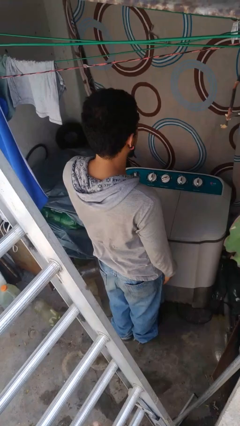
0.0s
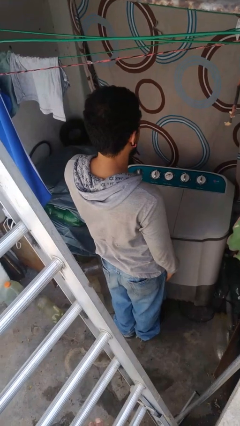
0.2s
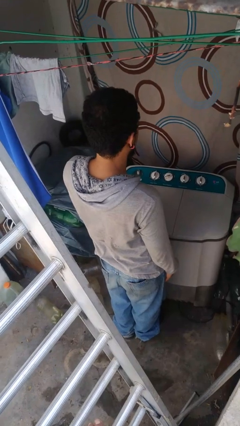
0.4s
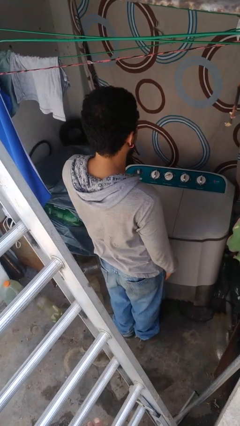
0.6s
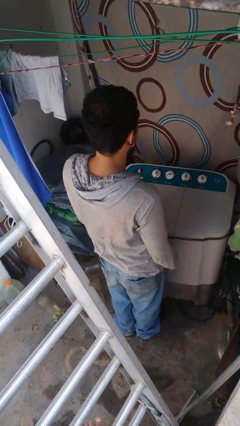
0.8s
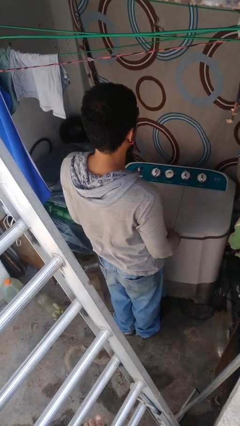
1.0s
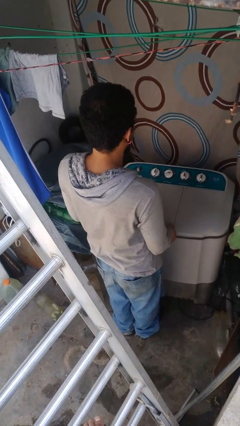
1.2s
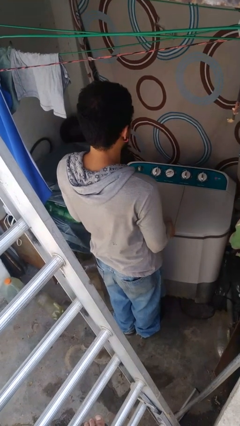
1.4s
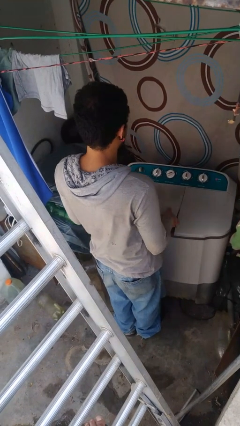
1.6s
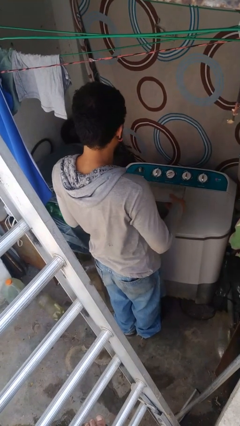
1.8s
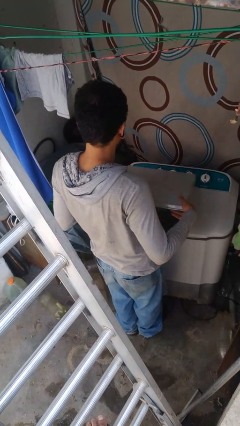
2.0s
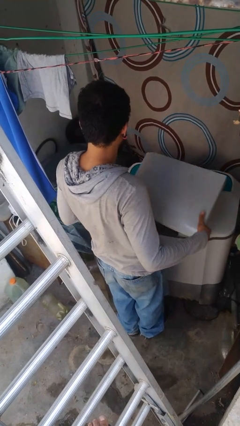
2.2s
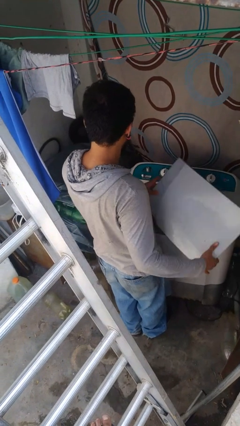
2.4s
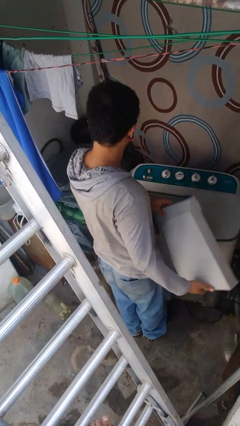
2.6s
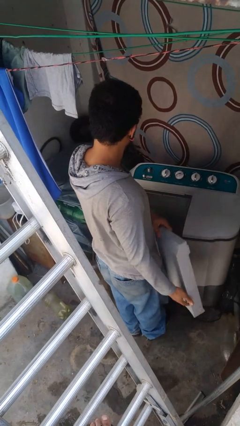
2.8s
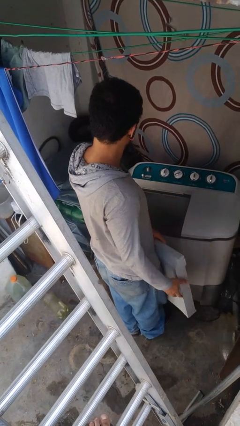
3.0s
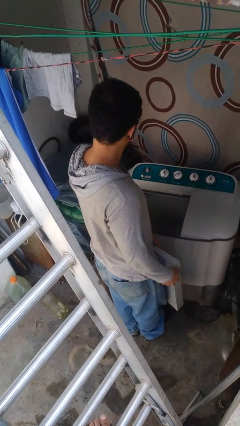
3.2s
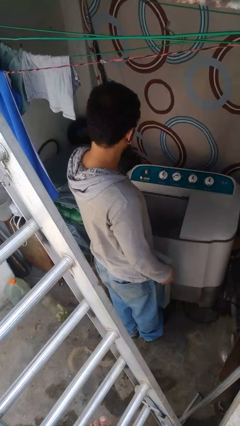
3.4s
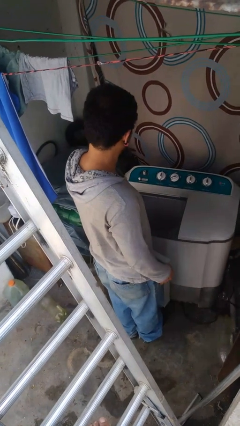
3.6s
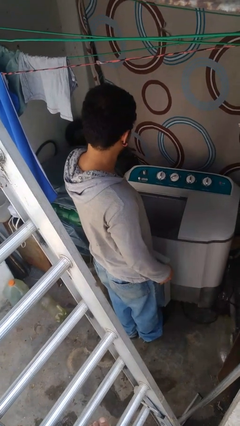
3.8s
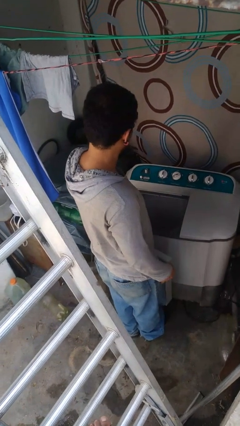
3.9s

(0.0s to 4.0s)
person opens clothes washer

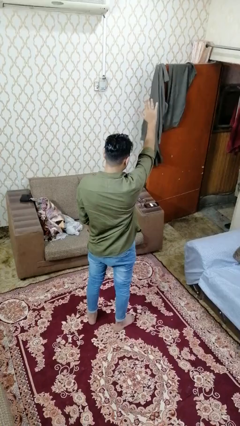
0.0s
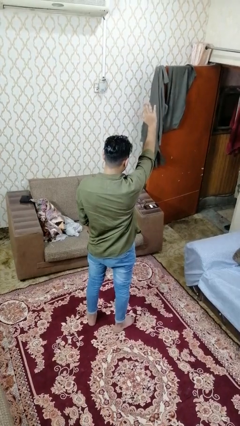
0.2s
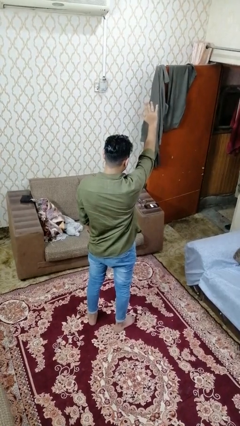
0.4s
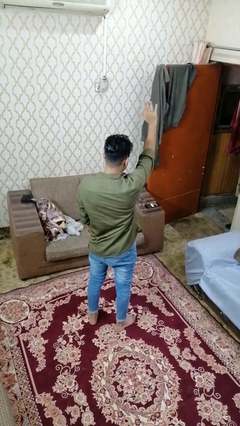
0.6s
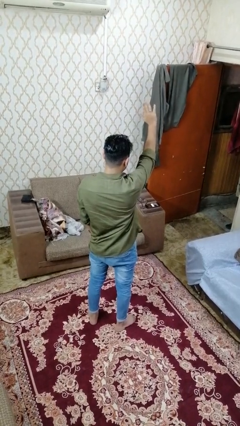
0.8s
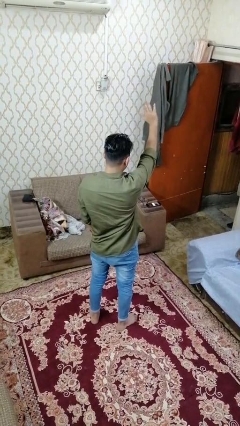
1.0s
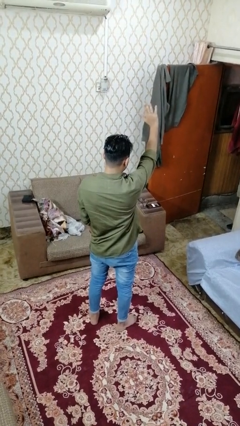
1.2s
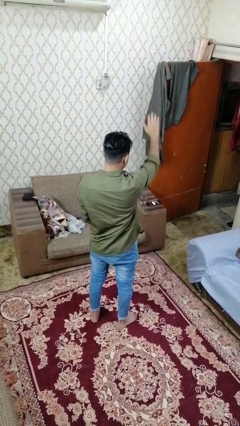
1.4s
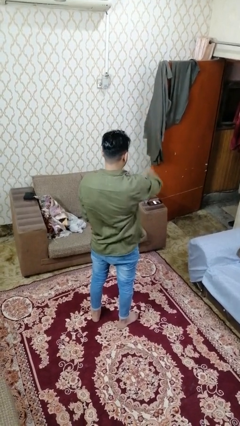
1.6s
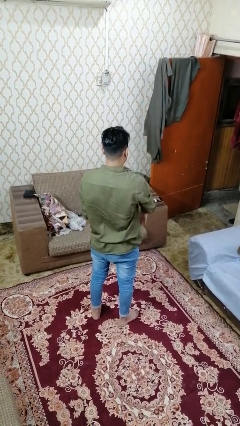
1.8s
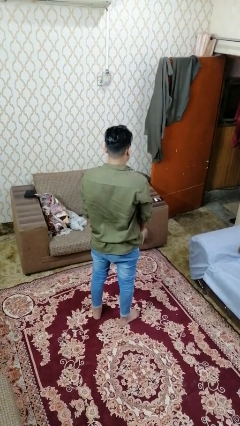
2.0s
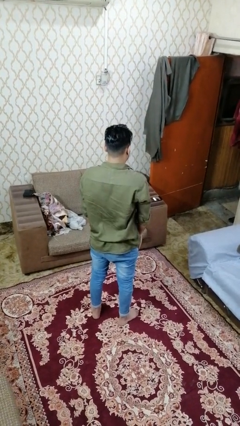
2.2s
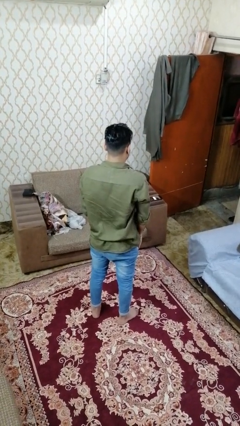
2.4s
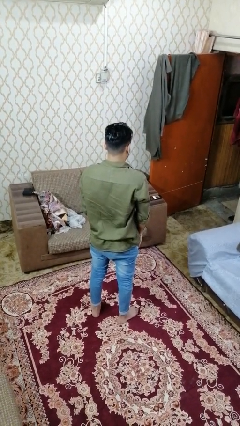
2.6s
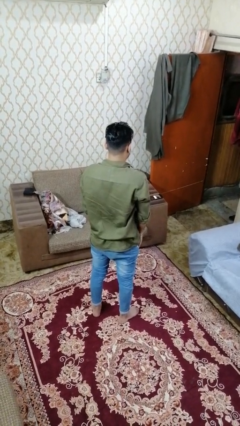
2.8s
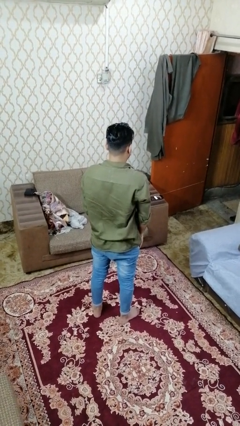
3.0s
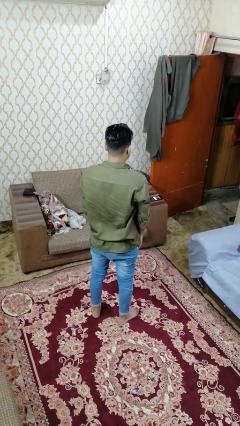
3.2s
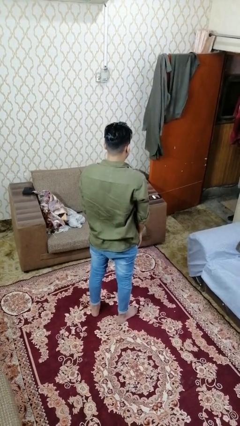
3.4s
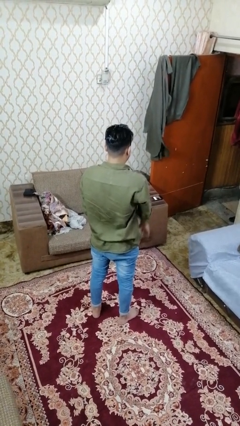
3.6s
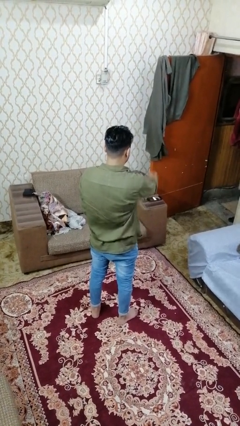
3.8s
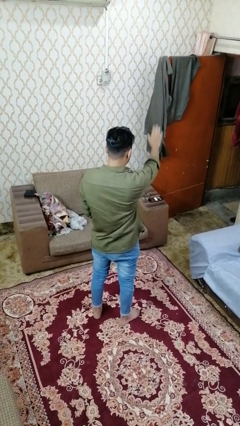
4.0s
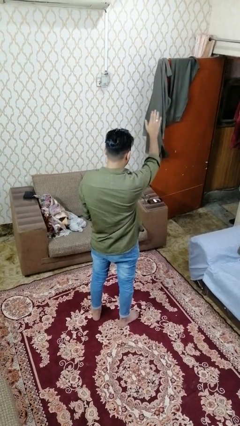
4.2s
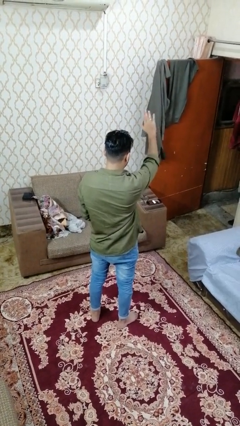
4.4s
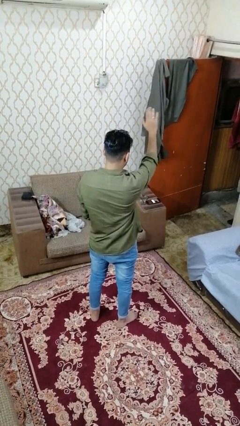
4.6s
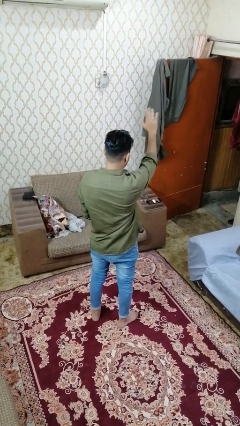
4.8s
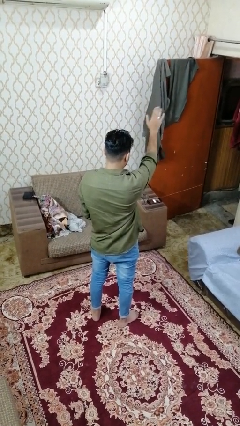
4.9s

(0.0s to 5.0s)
person carries furniture

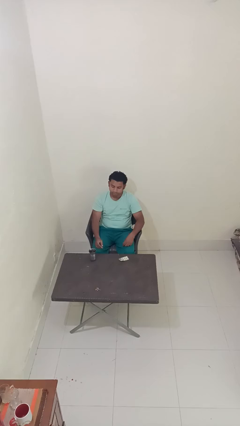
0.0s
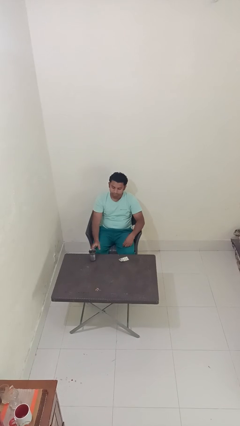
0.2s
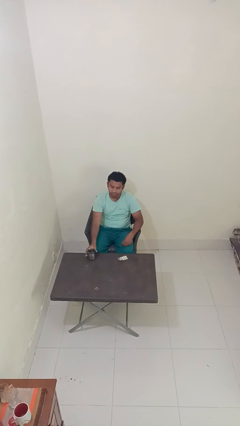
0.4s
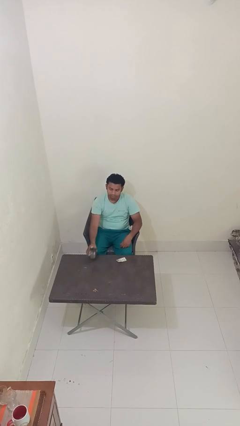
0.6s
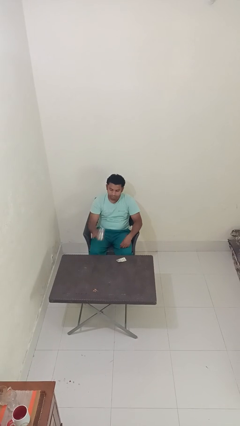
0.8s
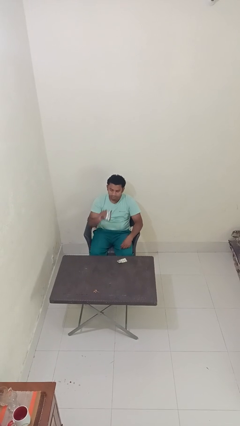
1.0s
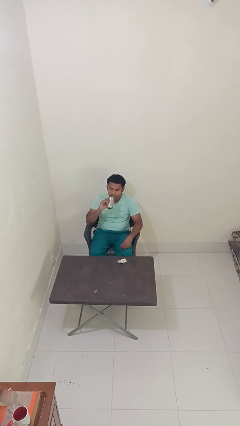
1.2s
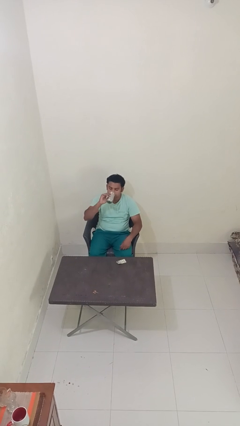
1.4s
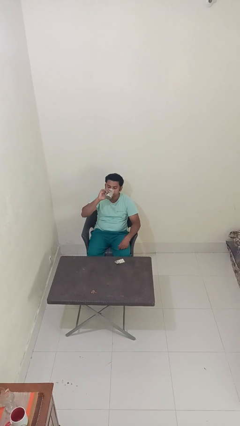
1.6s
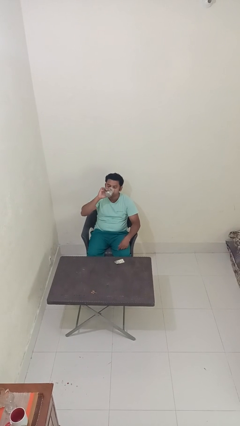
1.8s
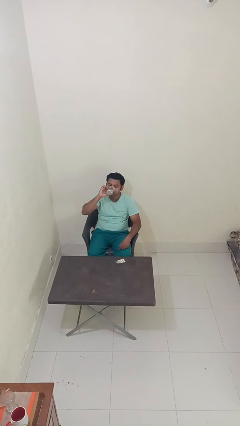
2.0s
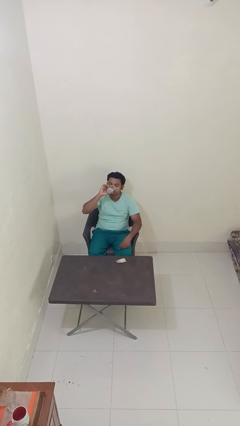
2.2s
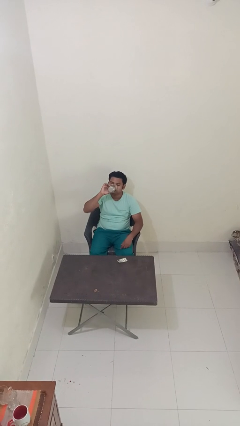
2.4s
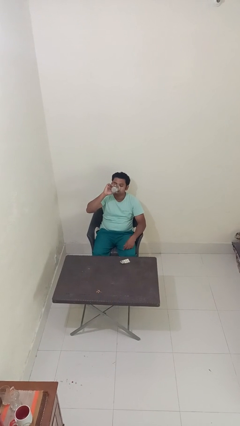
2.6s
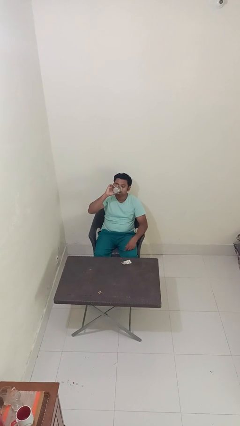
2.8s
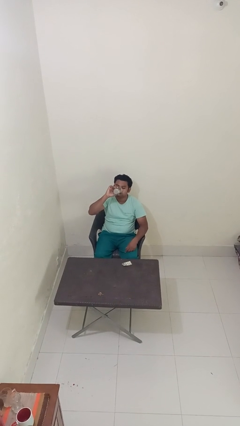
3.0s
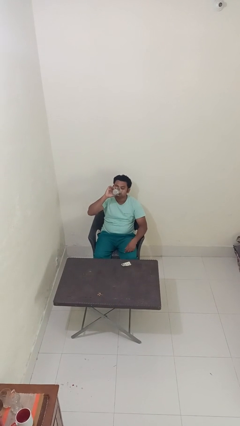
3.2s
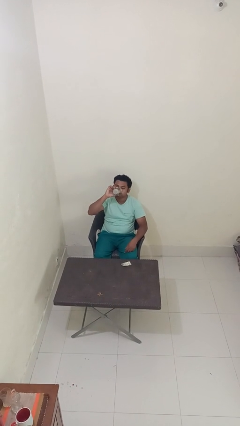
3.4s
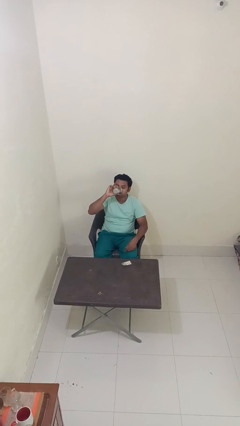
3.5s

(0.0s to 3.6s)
person drinks from cup

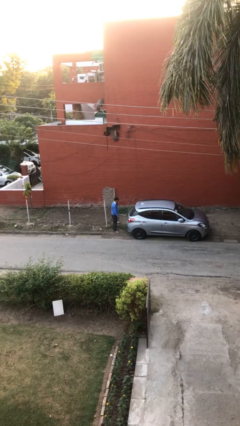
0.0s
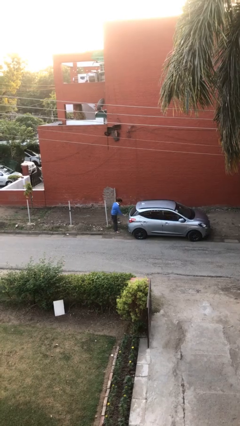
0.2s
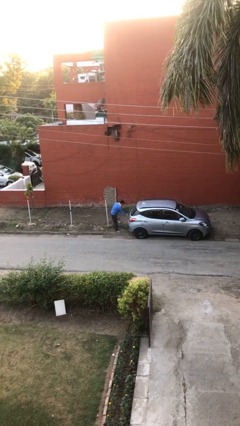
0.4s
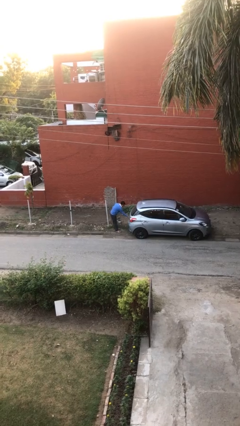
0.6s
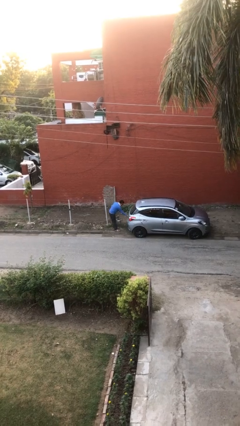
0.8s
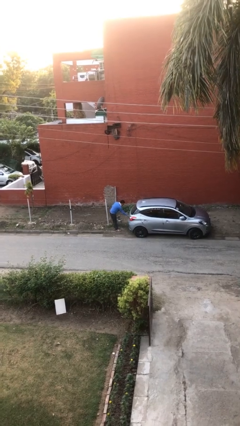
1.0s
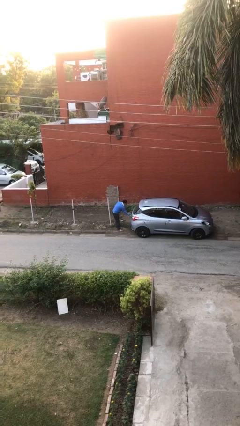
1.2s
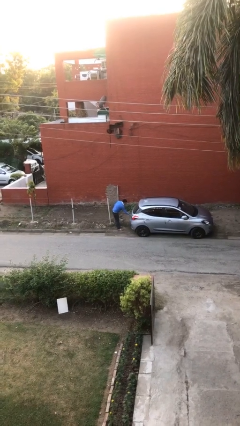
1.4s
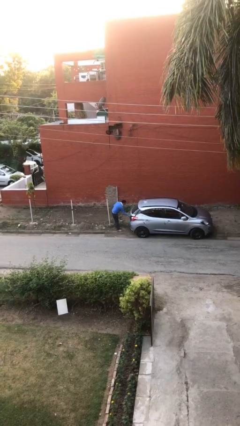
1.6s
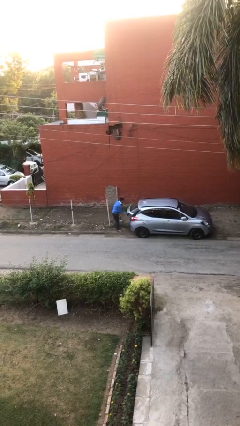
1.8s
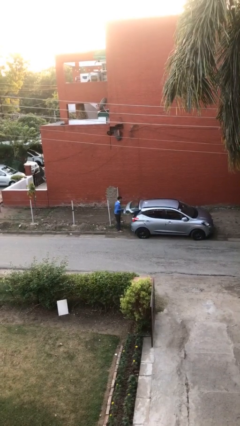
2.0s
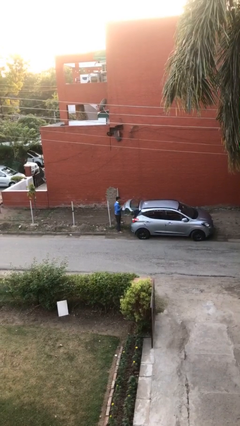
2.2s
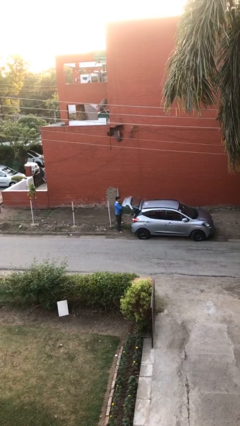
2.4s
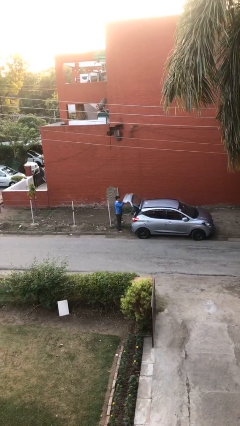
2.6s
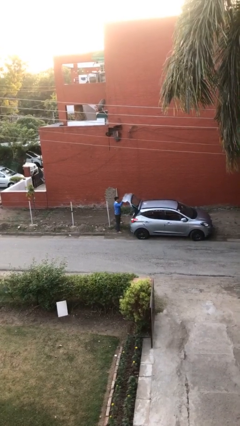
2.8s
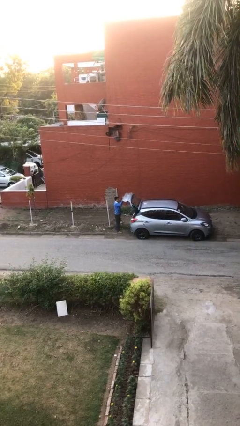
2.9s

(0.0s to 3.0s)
person opens car trunk

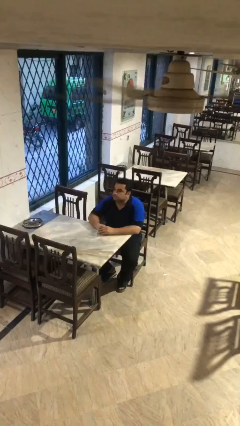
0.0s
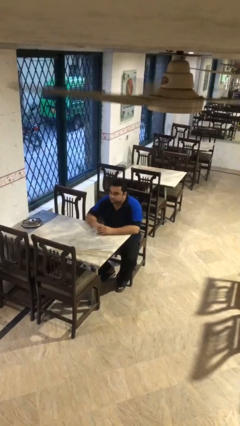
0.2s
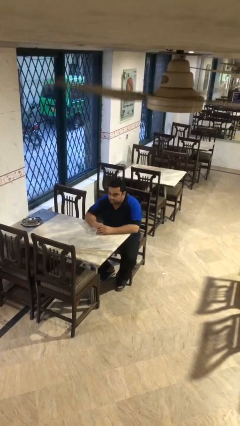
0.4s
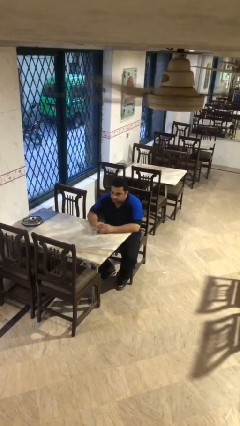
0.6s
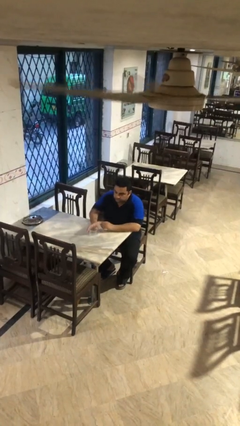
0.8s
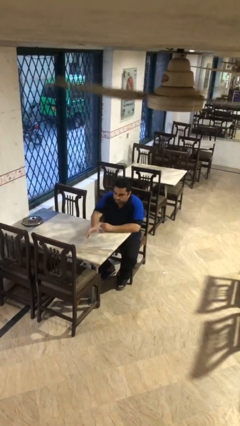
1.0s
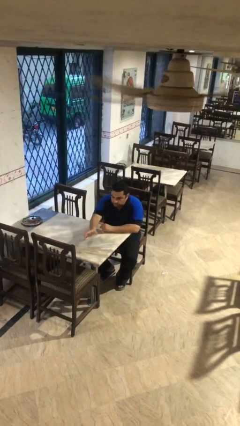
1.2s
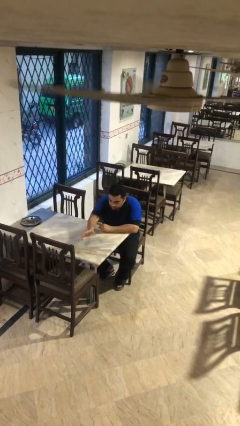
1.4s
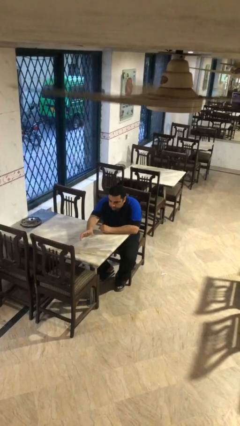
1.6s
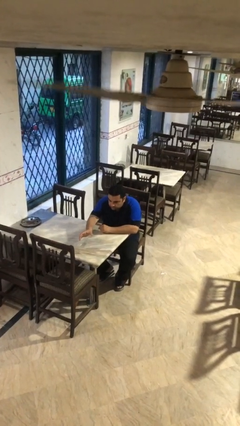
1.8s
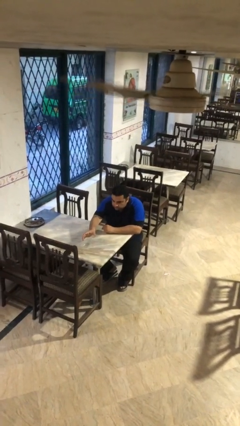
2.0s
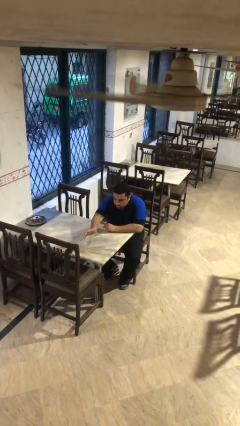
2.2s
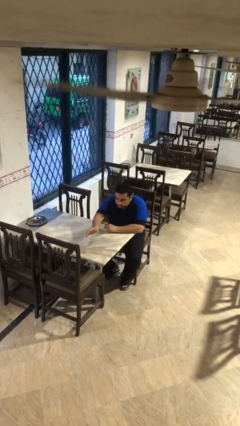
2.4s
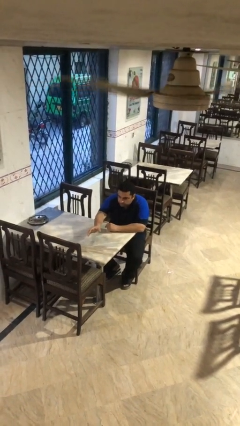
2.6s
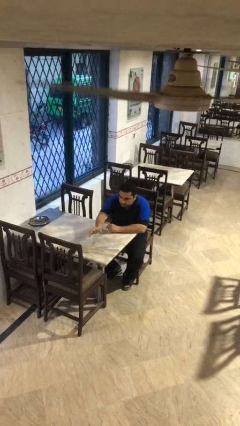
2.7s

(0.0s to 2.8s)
person knocks over glass
